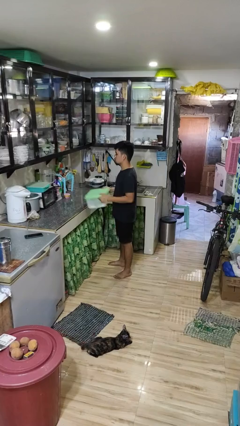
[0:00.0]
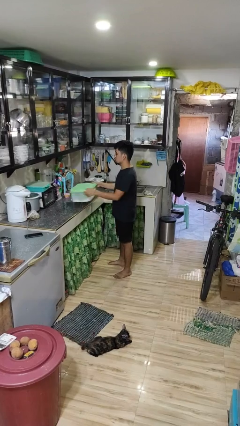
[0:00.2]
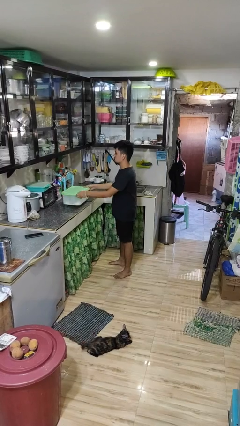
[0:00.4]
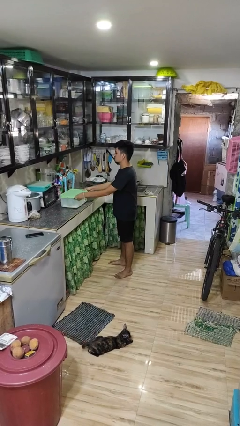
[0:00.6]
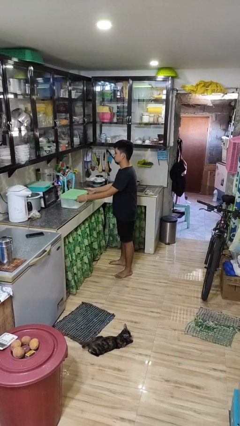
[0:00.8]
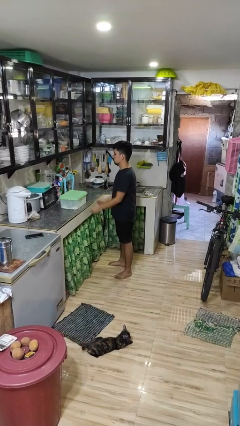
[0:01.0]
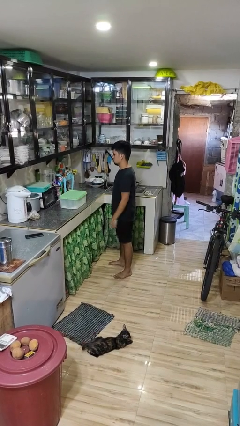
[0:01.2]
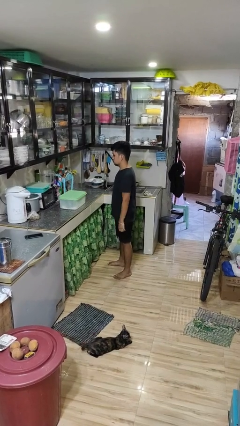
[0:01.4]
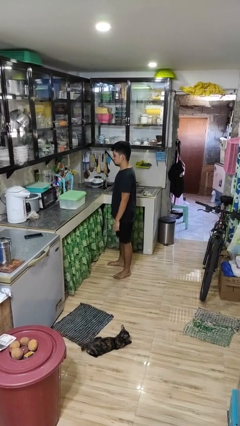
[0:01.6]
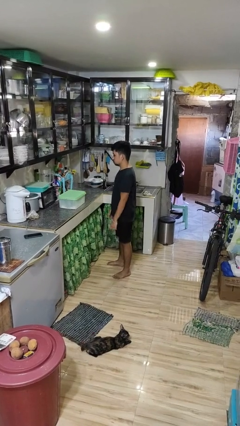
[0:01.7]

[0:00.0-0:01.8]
person puts down object on countertop

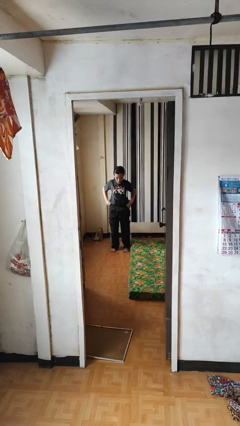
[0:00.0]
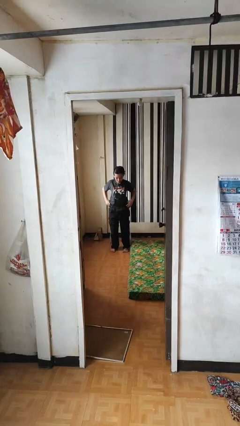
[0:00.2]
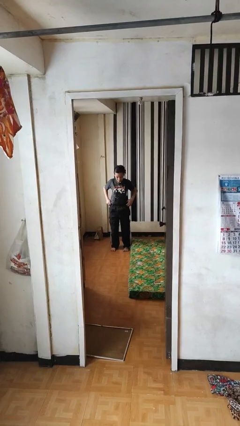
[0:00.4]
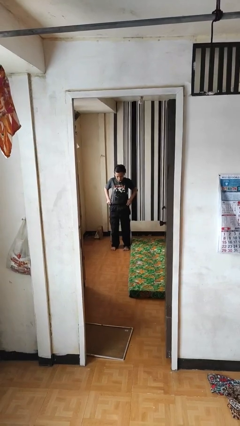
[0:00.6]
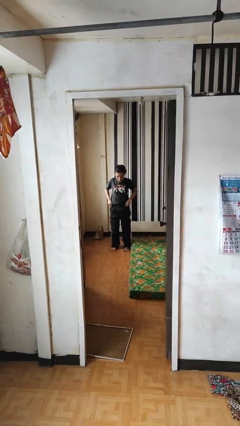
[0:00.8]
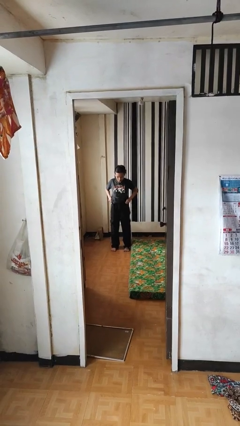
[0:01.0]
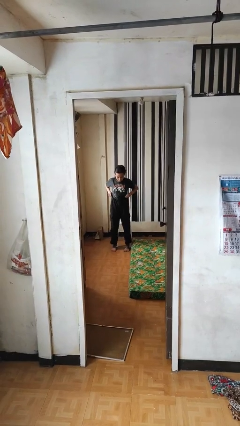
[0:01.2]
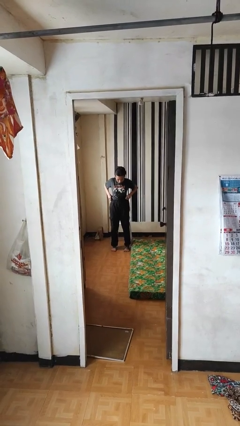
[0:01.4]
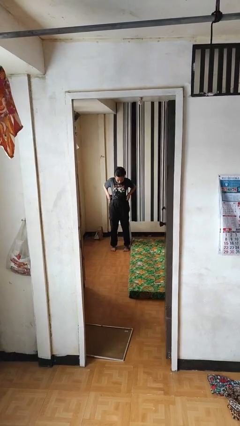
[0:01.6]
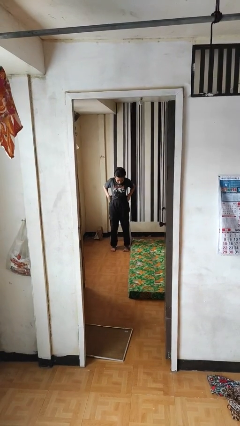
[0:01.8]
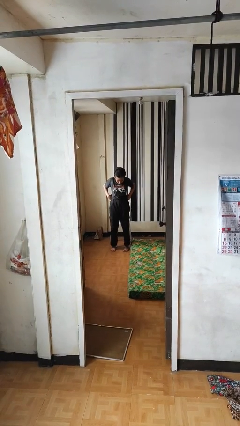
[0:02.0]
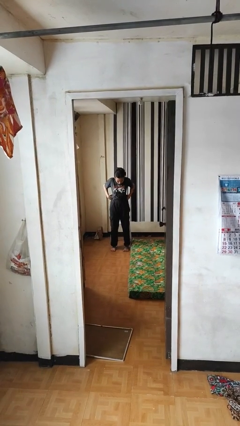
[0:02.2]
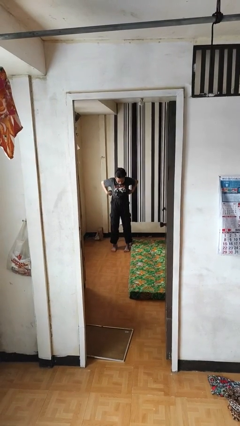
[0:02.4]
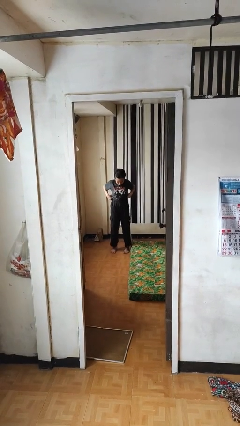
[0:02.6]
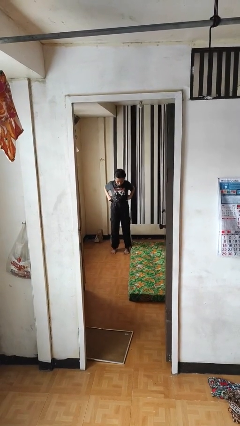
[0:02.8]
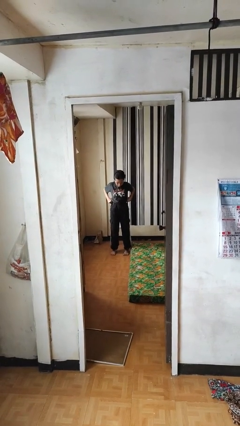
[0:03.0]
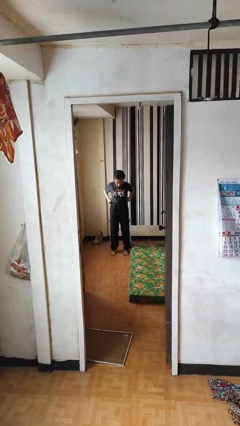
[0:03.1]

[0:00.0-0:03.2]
person hikes up pants

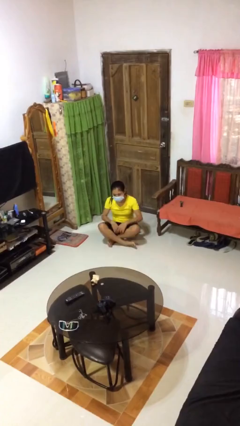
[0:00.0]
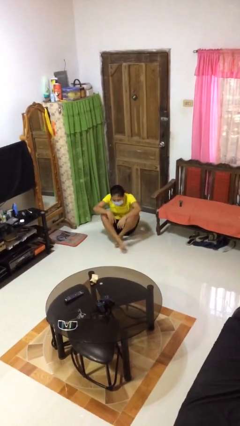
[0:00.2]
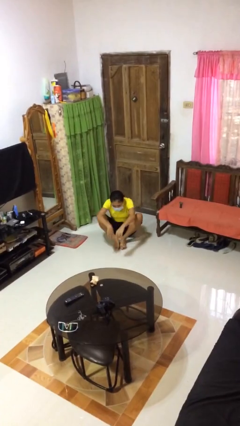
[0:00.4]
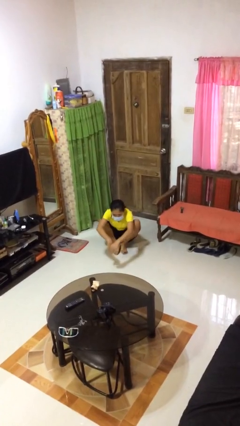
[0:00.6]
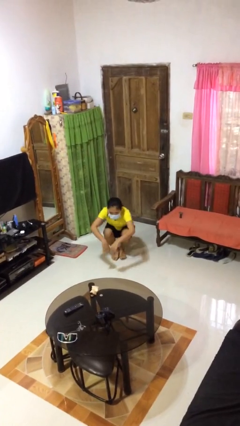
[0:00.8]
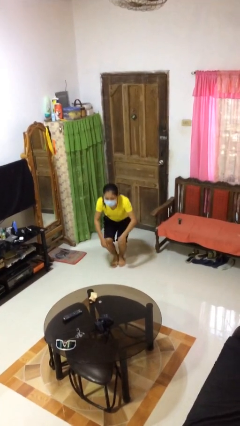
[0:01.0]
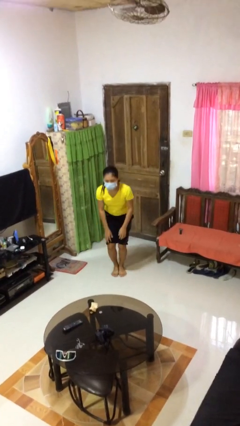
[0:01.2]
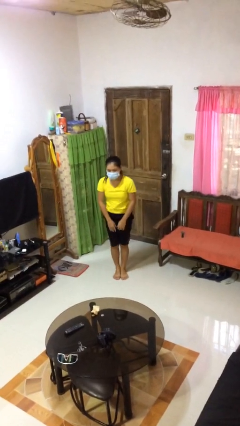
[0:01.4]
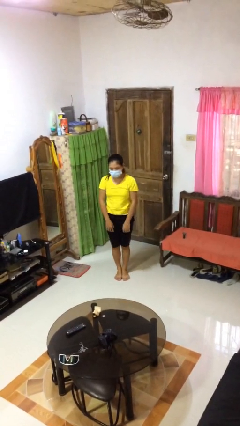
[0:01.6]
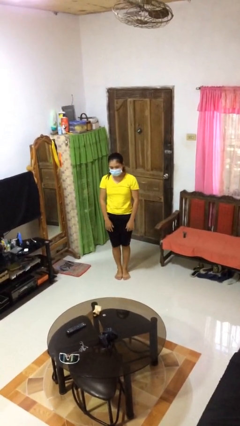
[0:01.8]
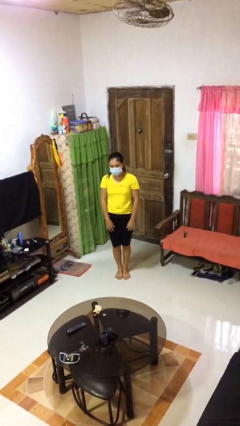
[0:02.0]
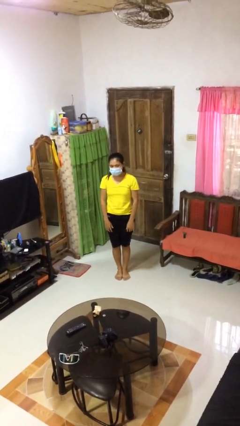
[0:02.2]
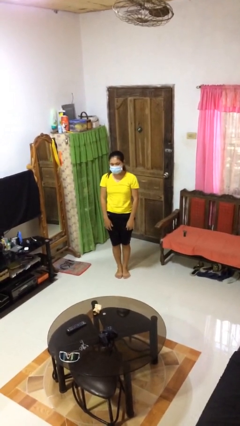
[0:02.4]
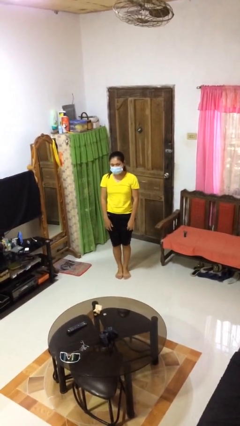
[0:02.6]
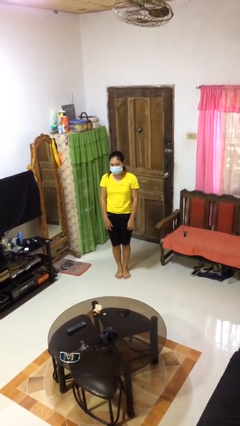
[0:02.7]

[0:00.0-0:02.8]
person stands up from floor

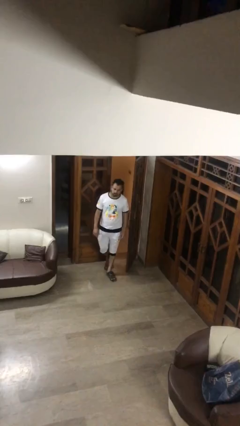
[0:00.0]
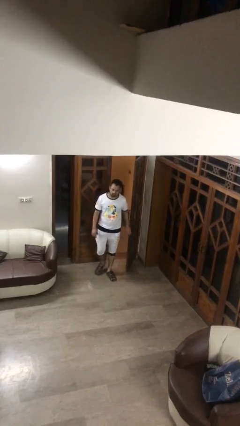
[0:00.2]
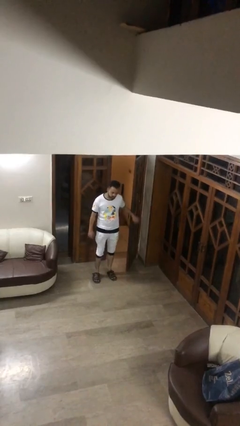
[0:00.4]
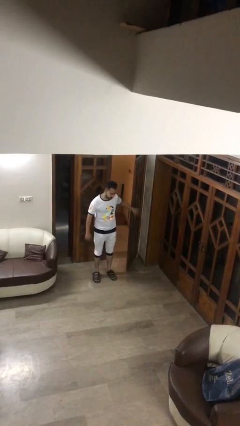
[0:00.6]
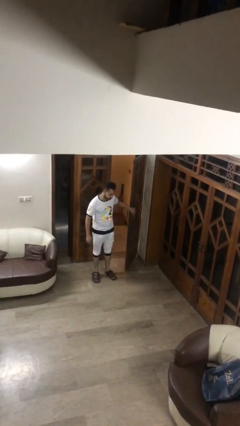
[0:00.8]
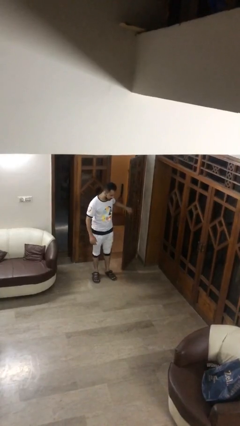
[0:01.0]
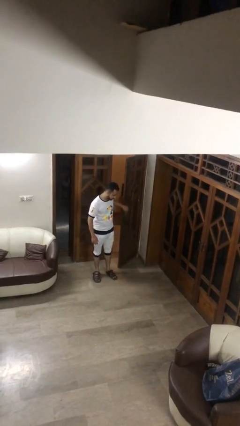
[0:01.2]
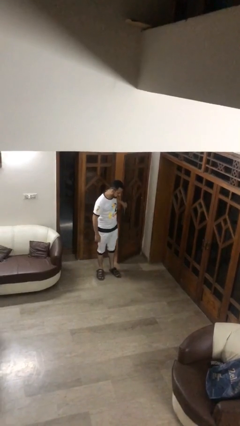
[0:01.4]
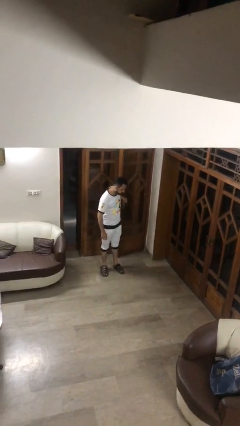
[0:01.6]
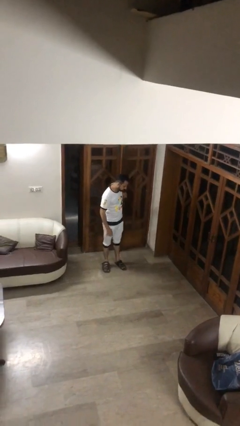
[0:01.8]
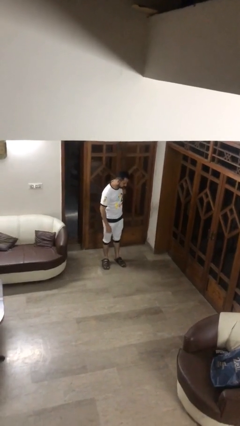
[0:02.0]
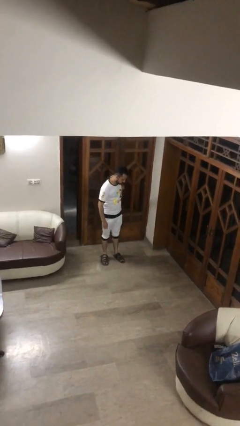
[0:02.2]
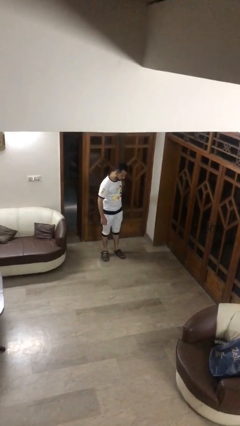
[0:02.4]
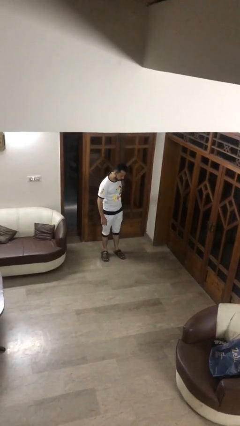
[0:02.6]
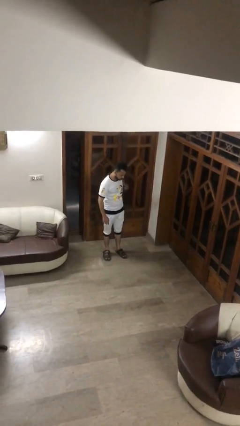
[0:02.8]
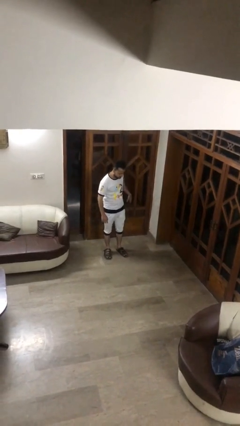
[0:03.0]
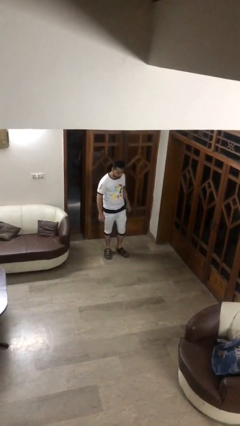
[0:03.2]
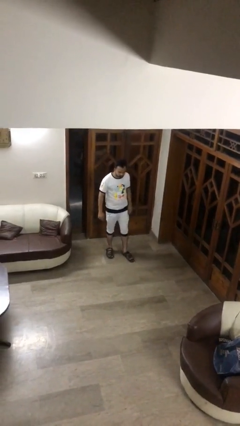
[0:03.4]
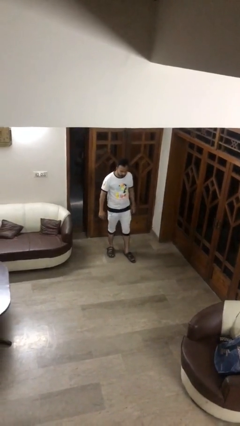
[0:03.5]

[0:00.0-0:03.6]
person closes facility door

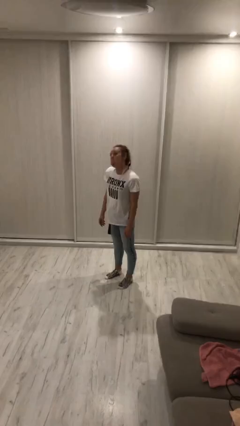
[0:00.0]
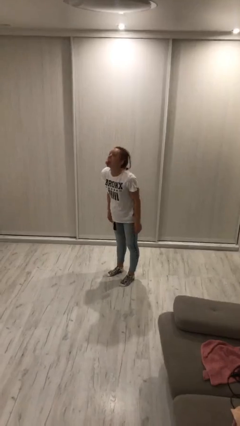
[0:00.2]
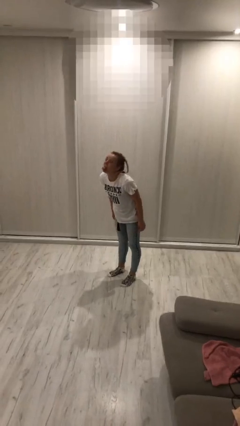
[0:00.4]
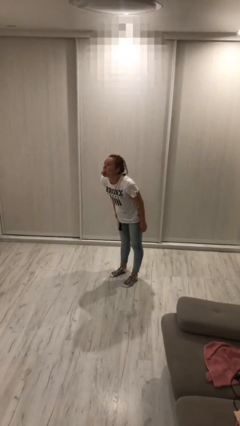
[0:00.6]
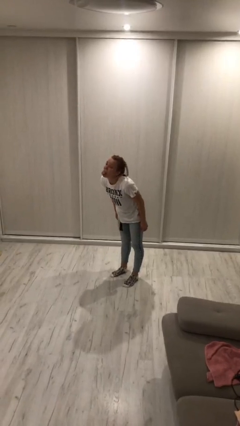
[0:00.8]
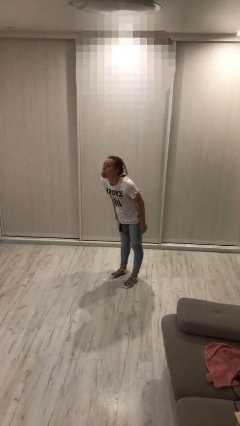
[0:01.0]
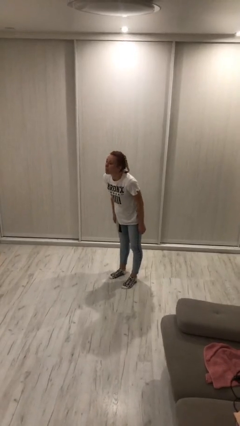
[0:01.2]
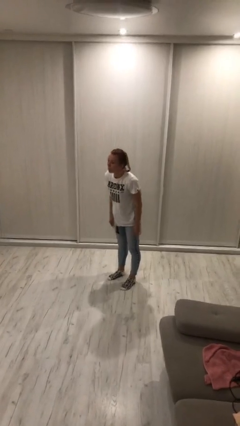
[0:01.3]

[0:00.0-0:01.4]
person sticks out tongue

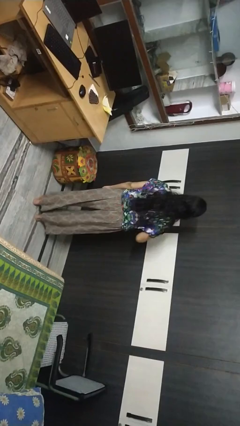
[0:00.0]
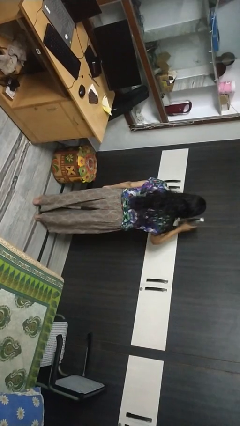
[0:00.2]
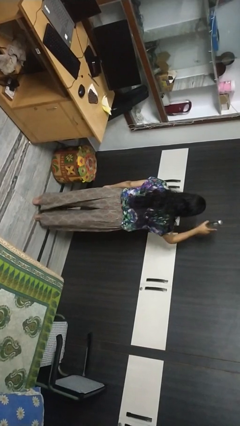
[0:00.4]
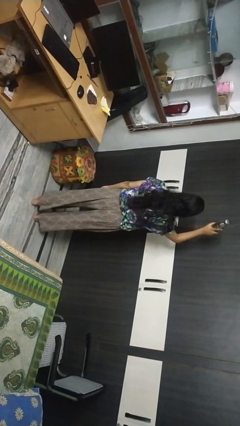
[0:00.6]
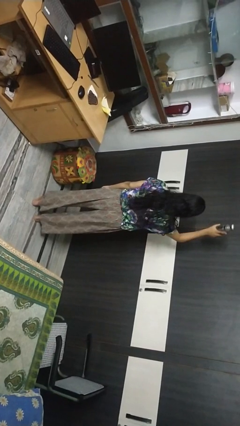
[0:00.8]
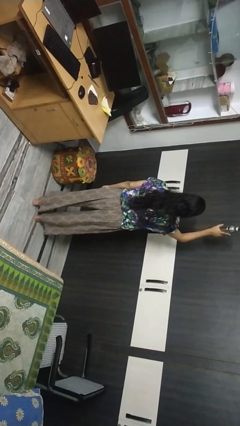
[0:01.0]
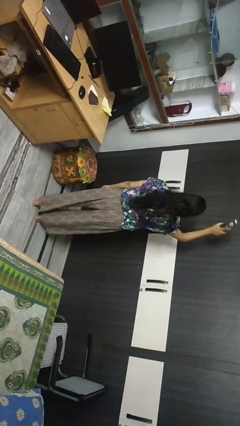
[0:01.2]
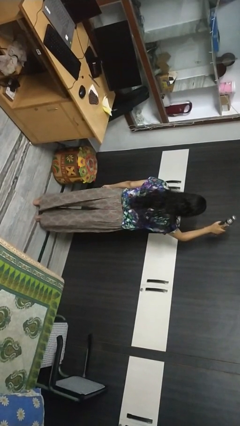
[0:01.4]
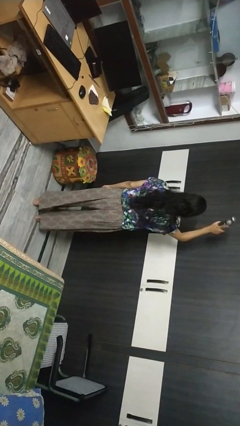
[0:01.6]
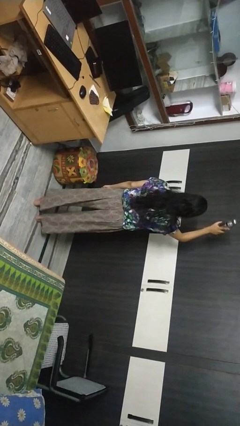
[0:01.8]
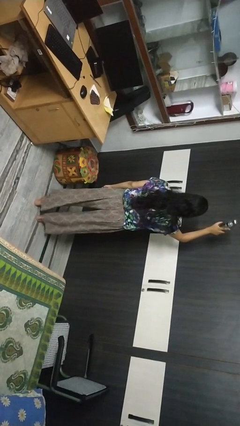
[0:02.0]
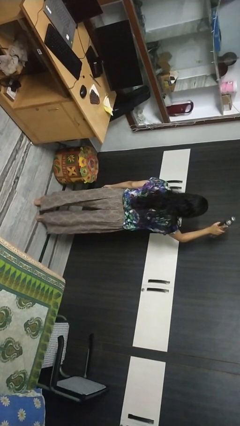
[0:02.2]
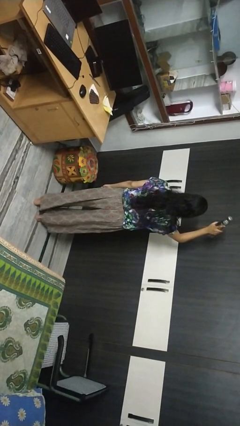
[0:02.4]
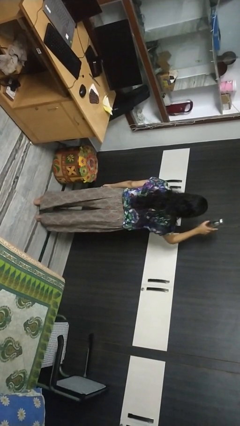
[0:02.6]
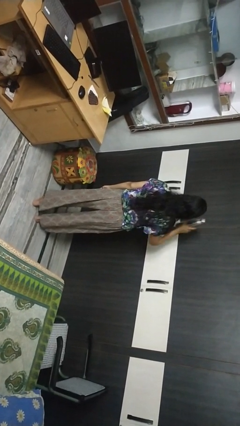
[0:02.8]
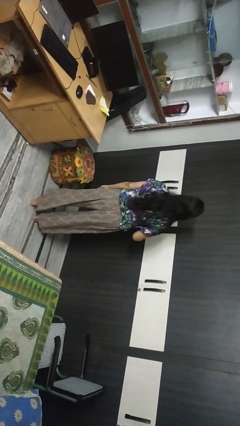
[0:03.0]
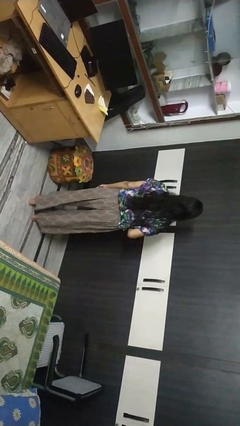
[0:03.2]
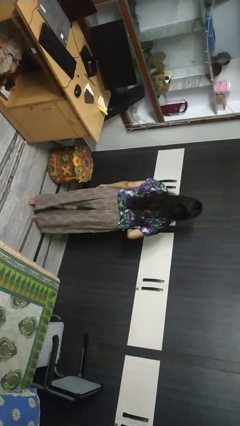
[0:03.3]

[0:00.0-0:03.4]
person holds object above head

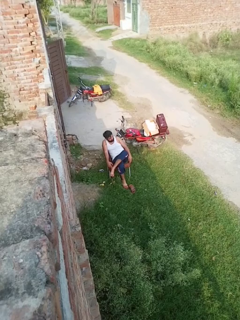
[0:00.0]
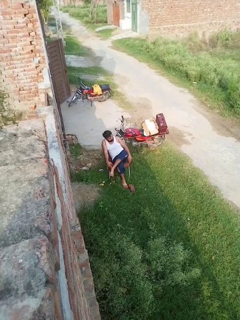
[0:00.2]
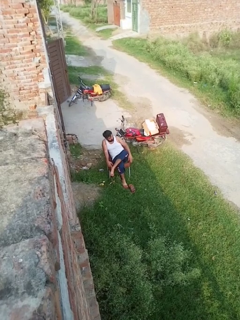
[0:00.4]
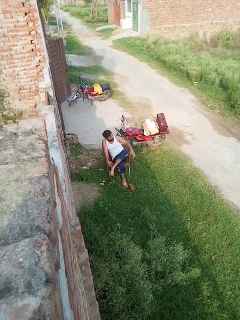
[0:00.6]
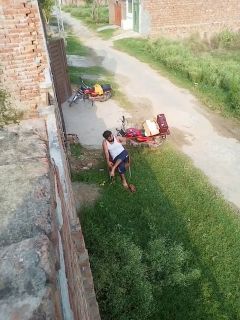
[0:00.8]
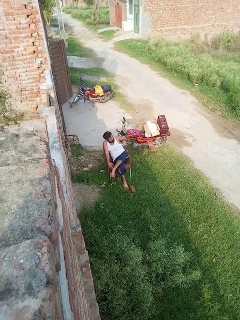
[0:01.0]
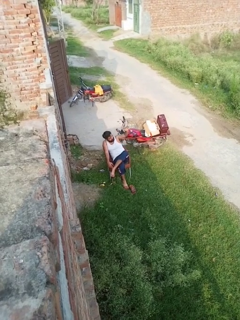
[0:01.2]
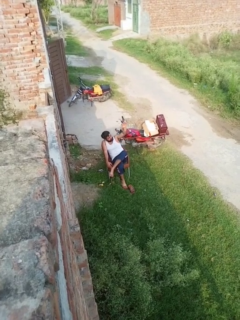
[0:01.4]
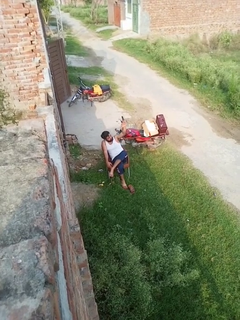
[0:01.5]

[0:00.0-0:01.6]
person gestures swipe up
